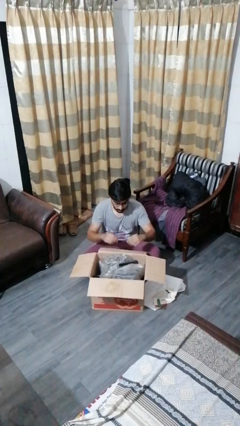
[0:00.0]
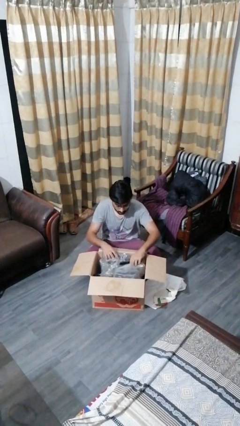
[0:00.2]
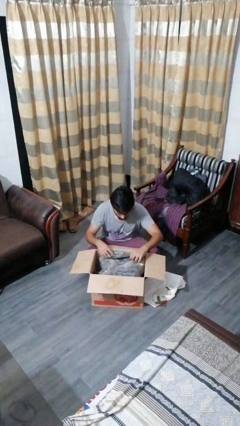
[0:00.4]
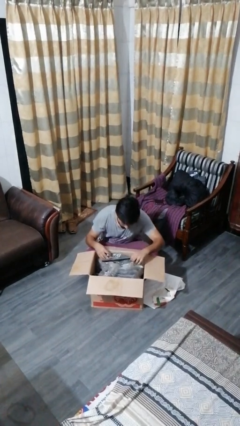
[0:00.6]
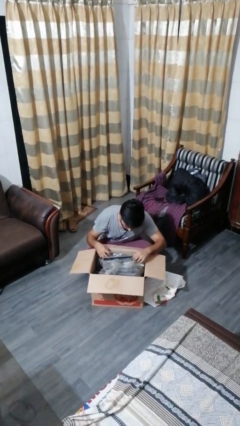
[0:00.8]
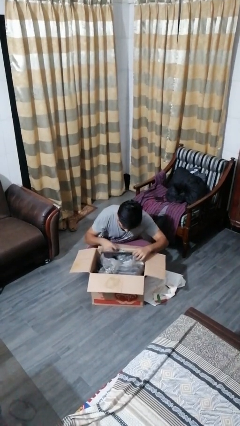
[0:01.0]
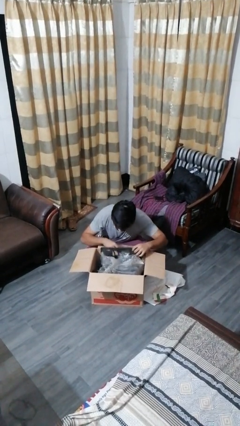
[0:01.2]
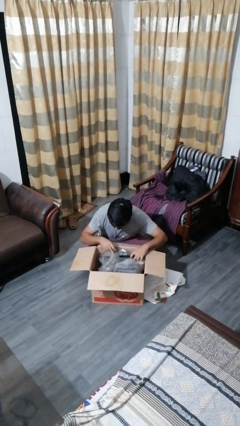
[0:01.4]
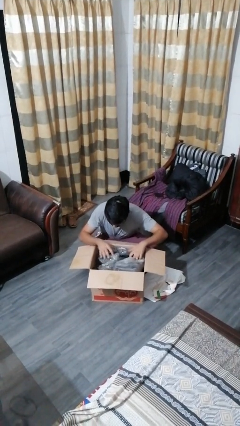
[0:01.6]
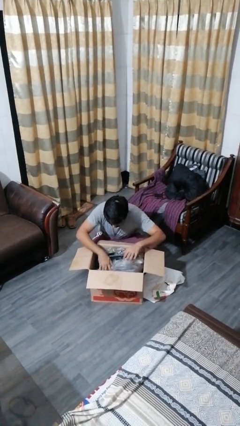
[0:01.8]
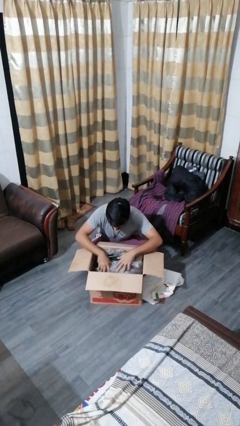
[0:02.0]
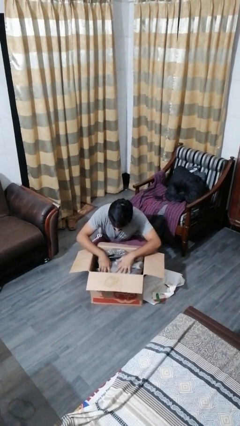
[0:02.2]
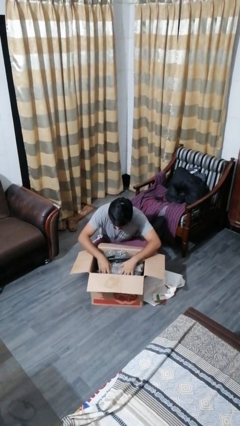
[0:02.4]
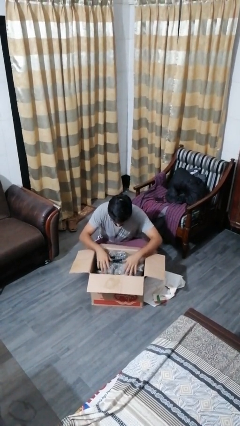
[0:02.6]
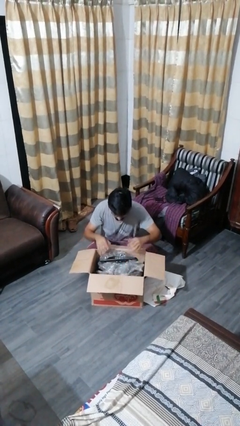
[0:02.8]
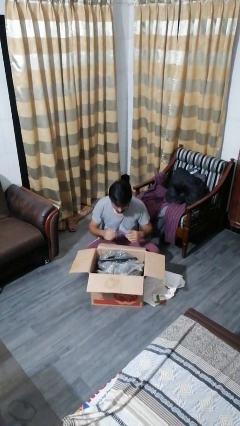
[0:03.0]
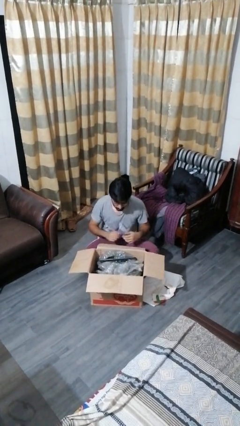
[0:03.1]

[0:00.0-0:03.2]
person searches in box

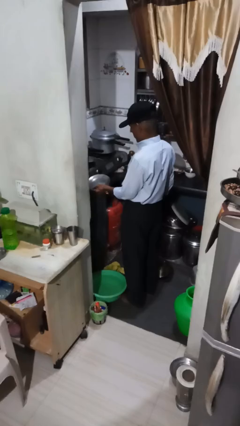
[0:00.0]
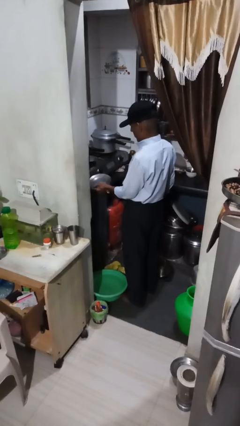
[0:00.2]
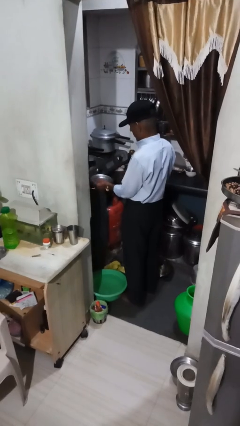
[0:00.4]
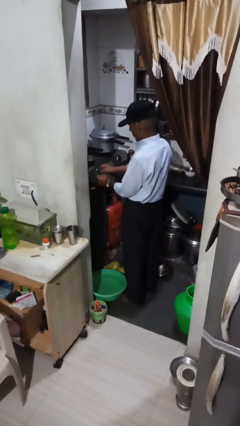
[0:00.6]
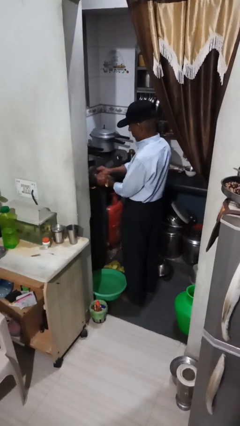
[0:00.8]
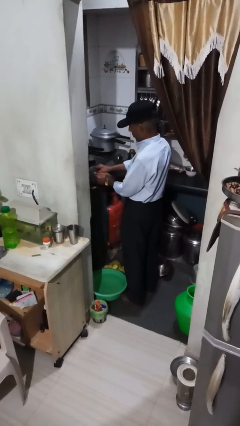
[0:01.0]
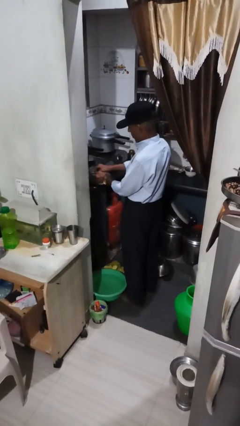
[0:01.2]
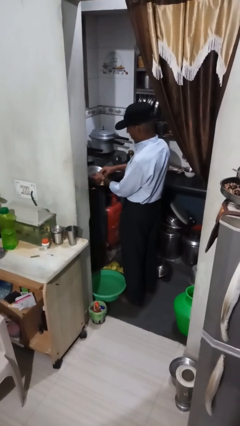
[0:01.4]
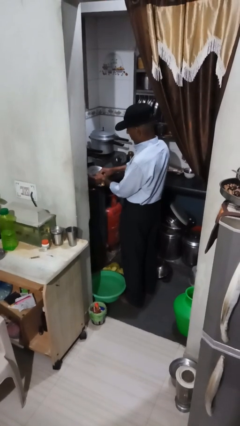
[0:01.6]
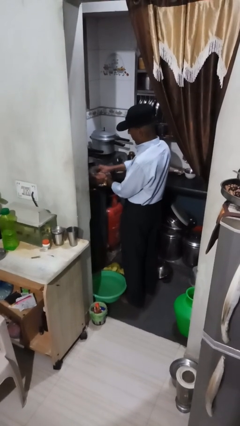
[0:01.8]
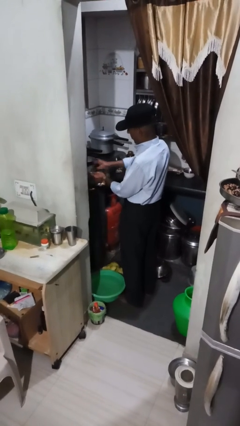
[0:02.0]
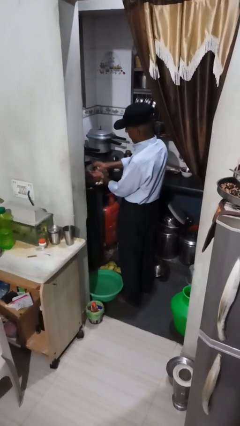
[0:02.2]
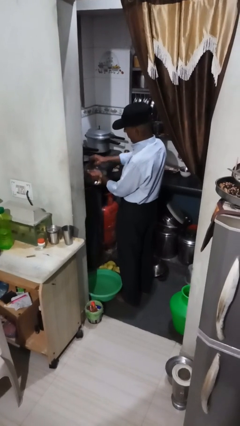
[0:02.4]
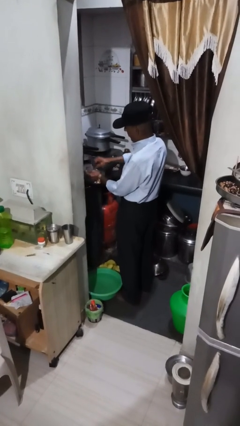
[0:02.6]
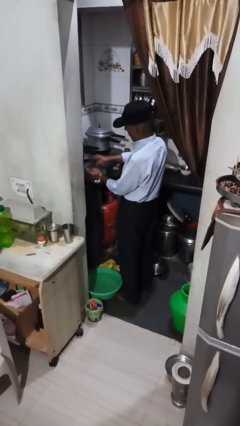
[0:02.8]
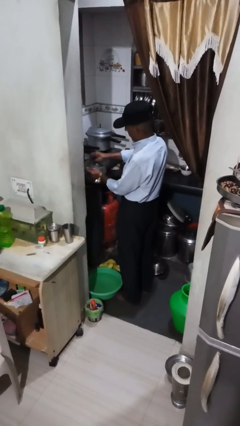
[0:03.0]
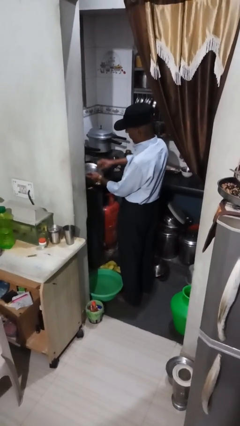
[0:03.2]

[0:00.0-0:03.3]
person washes dish

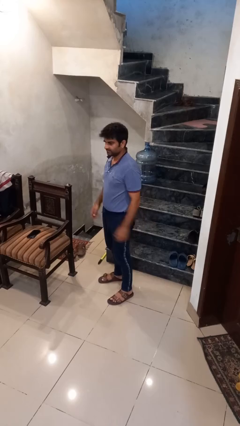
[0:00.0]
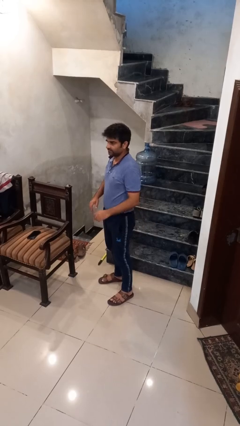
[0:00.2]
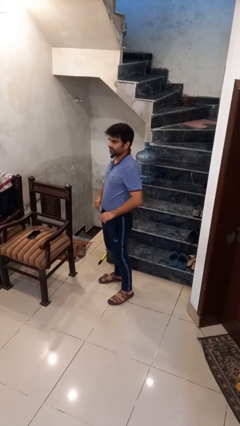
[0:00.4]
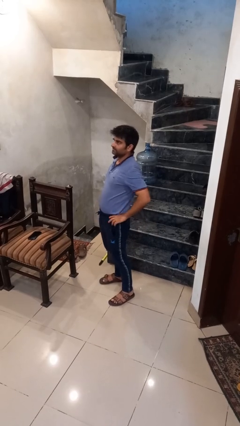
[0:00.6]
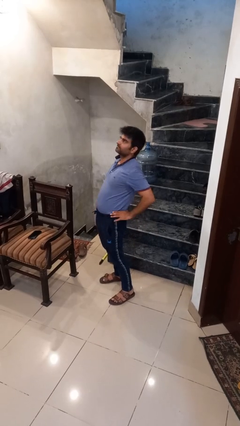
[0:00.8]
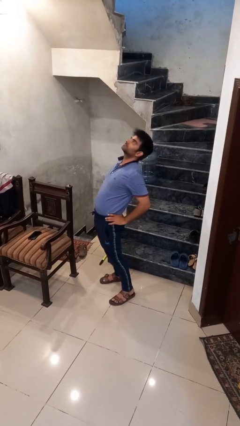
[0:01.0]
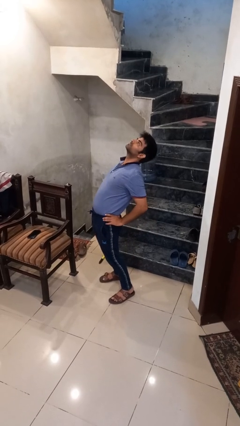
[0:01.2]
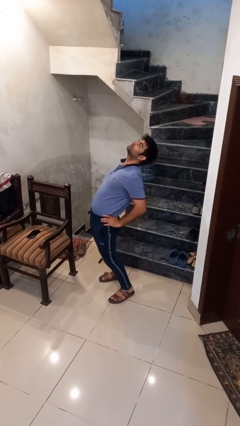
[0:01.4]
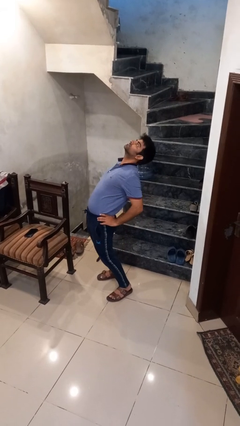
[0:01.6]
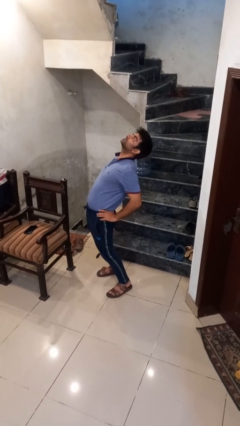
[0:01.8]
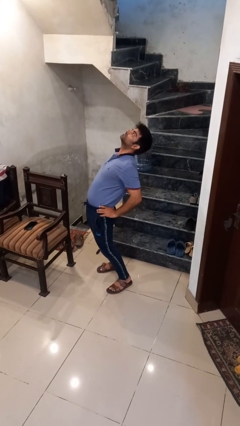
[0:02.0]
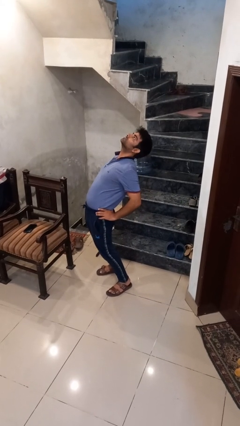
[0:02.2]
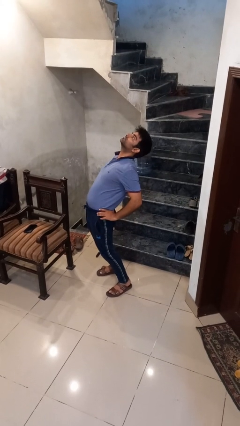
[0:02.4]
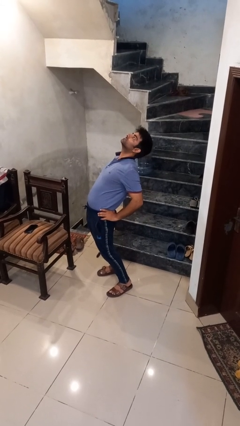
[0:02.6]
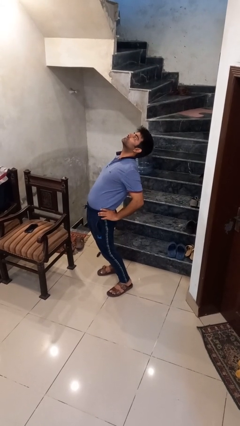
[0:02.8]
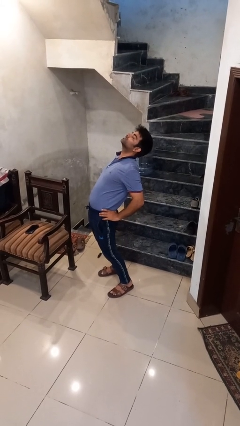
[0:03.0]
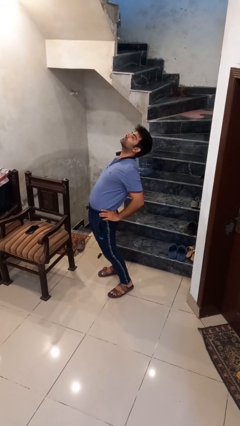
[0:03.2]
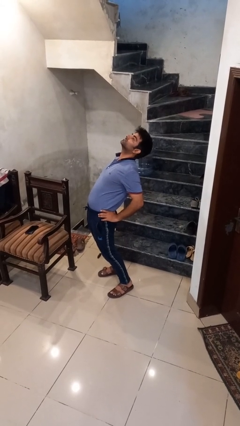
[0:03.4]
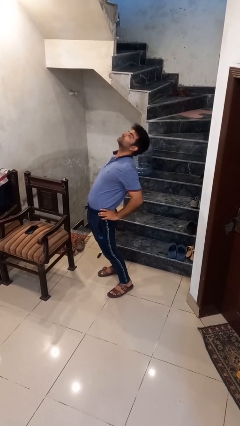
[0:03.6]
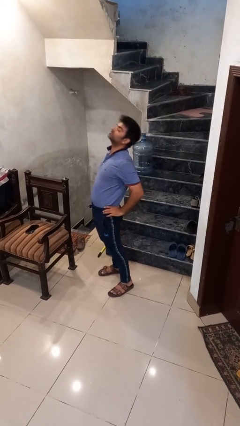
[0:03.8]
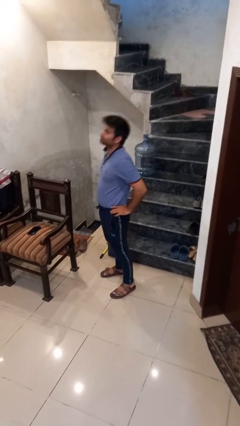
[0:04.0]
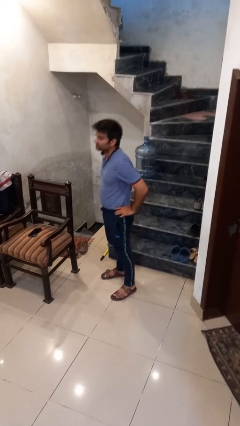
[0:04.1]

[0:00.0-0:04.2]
person stretches back

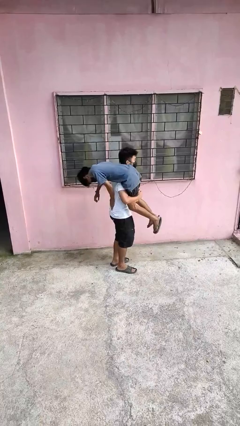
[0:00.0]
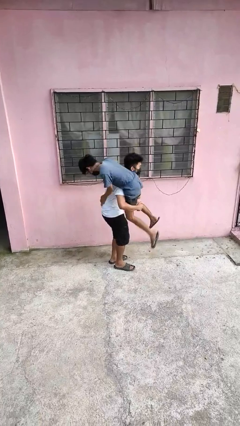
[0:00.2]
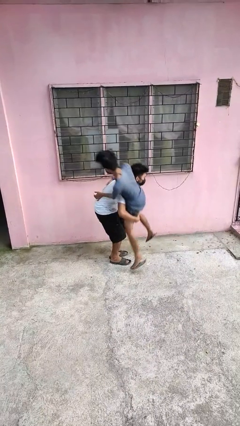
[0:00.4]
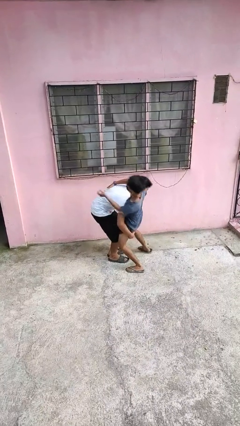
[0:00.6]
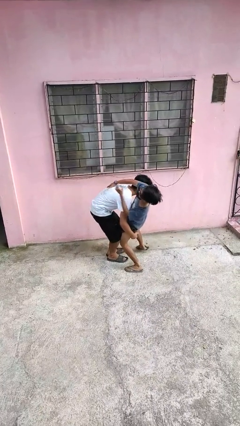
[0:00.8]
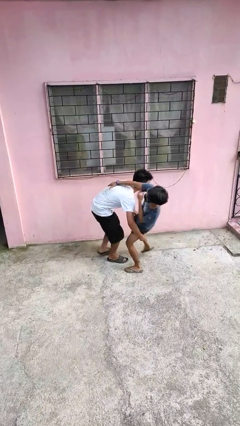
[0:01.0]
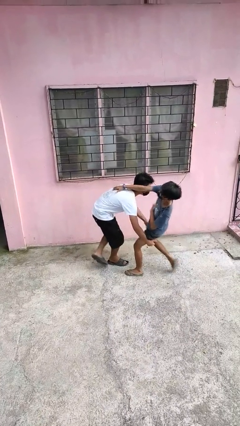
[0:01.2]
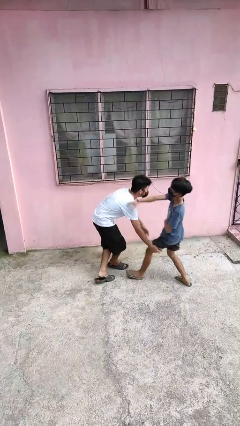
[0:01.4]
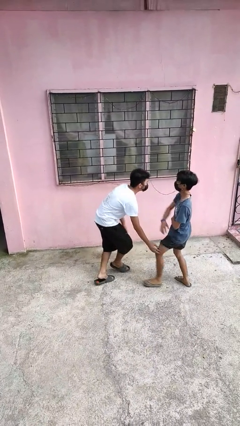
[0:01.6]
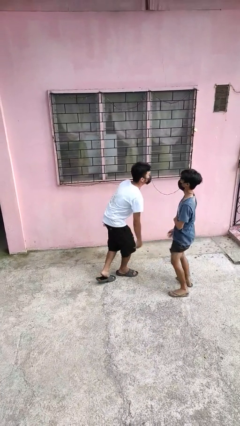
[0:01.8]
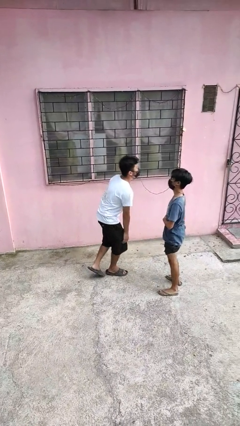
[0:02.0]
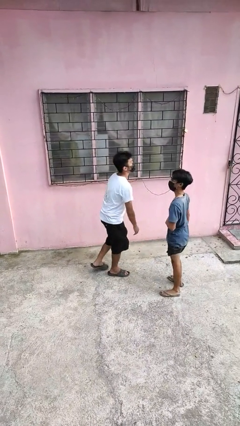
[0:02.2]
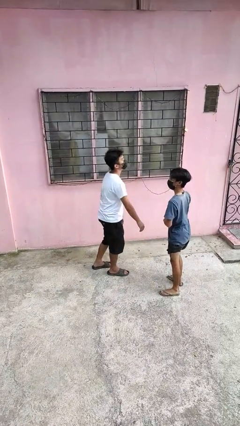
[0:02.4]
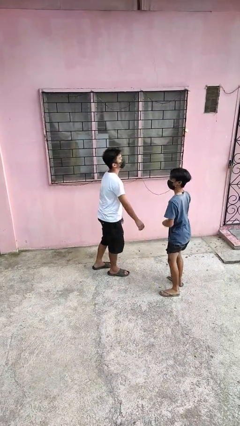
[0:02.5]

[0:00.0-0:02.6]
person puts down person

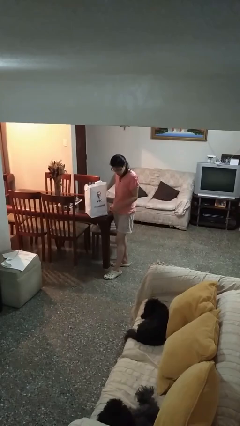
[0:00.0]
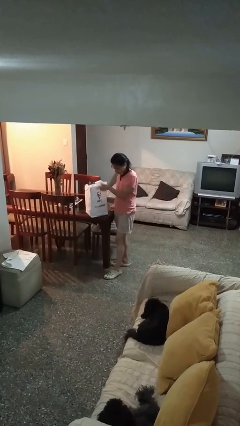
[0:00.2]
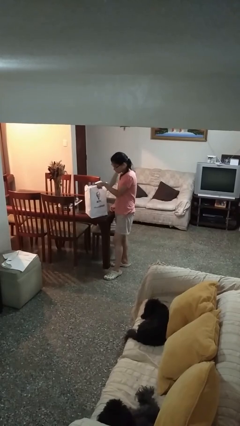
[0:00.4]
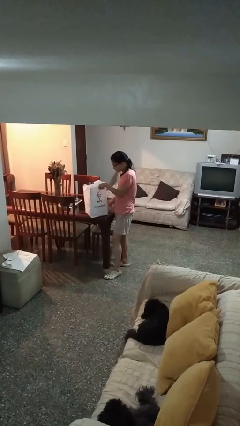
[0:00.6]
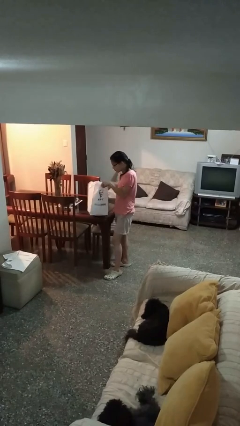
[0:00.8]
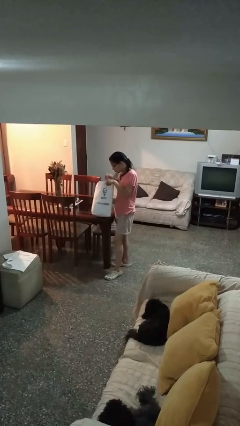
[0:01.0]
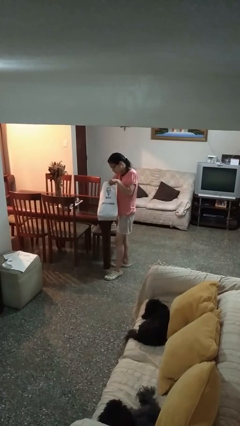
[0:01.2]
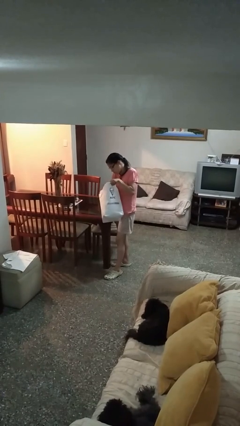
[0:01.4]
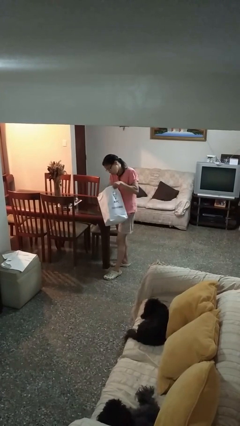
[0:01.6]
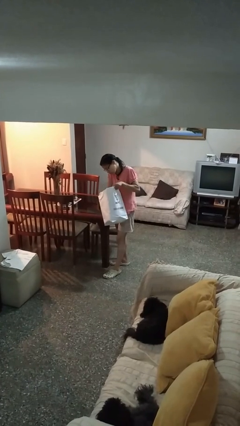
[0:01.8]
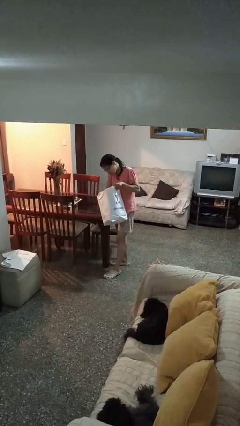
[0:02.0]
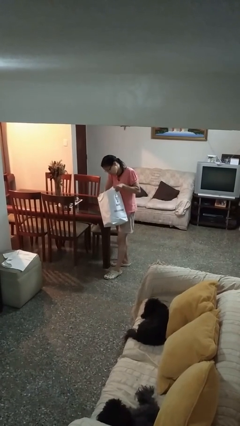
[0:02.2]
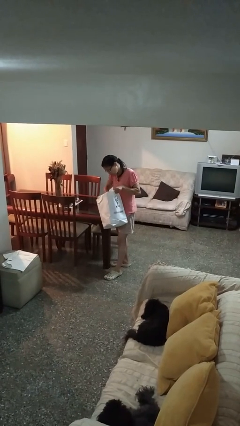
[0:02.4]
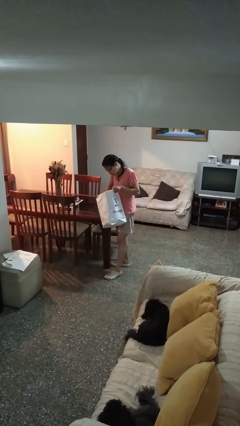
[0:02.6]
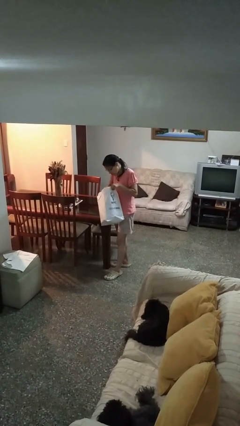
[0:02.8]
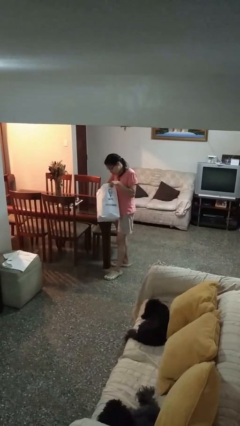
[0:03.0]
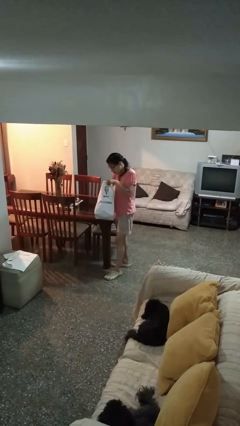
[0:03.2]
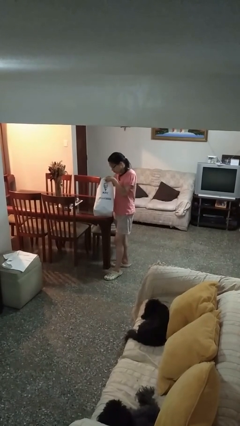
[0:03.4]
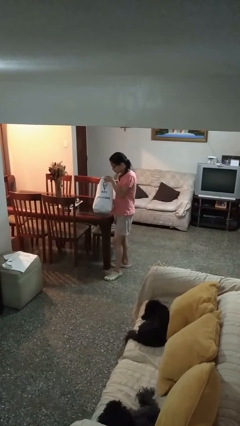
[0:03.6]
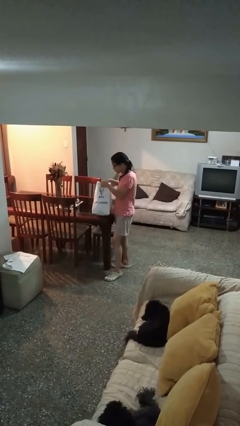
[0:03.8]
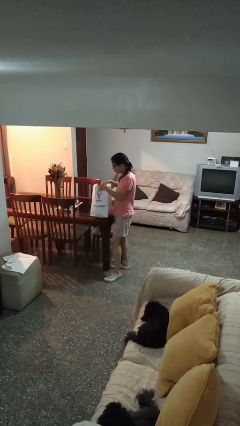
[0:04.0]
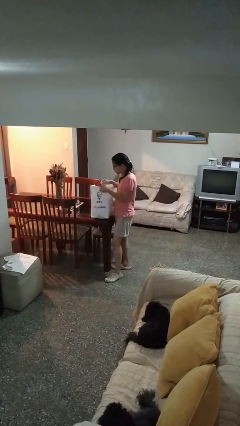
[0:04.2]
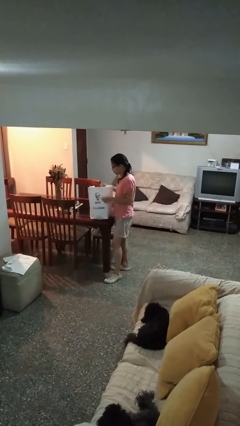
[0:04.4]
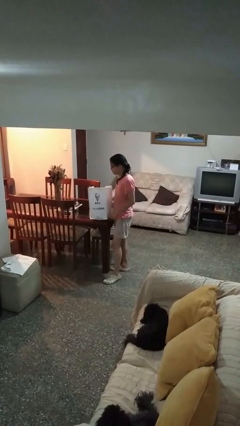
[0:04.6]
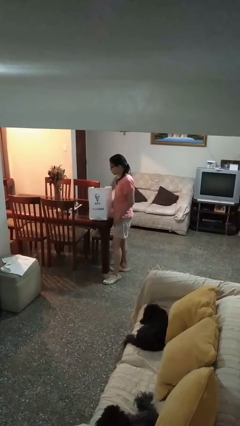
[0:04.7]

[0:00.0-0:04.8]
person searches in bag
